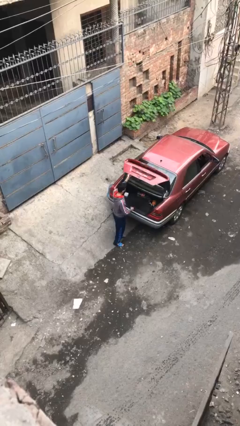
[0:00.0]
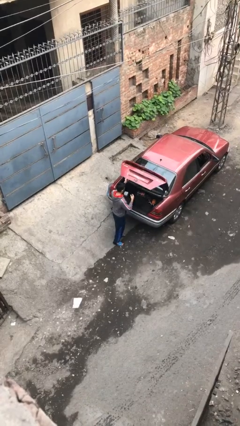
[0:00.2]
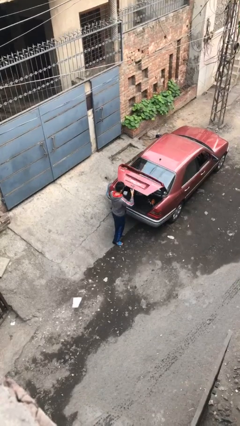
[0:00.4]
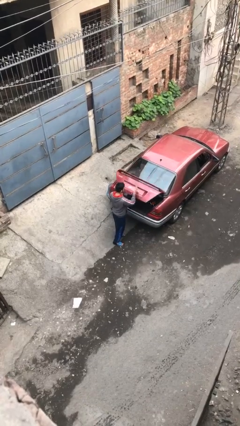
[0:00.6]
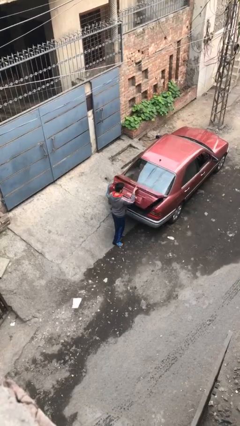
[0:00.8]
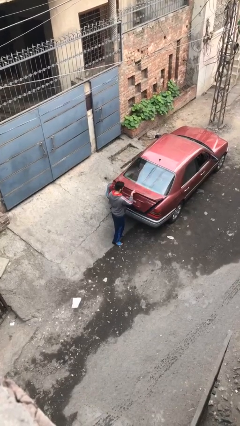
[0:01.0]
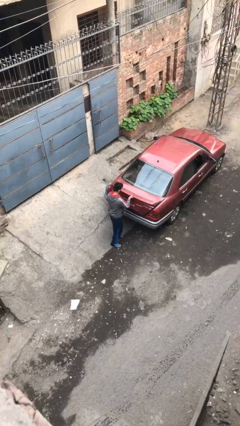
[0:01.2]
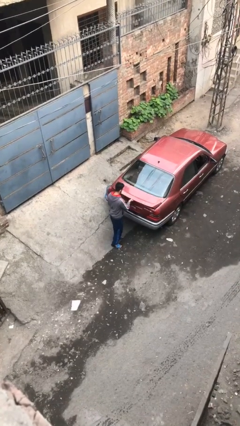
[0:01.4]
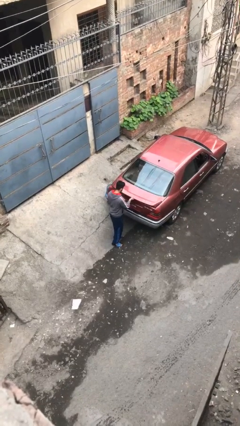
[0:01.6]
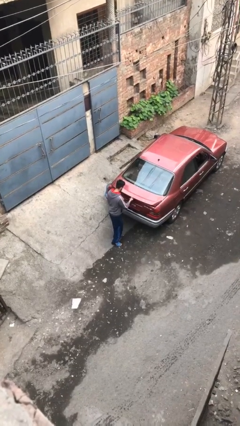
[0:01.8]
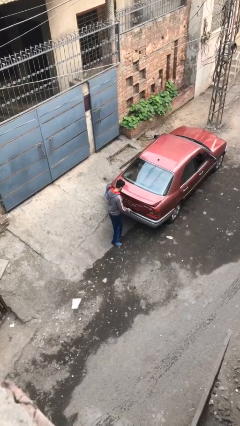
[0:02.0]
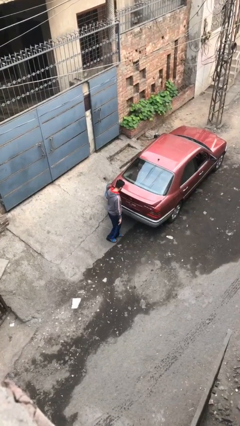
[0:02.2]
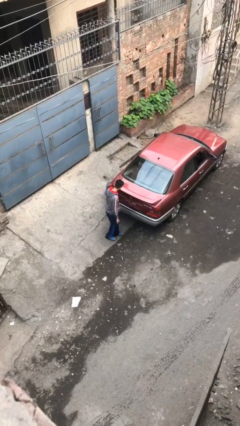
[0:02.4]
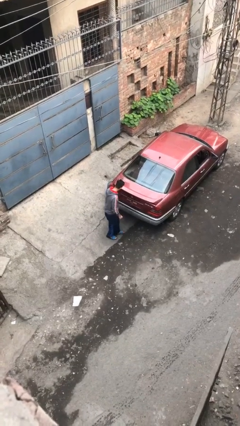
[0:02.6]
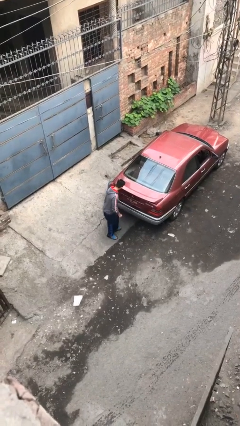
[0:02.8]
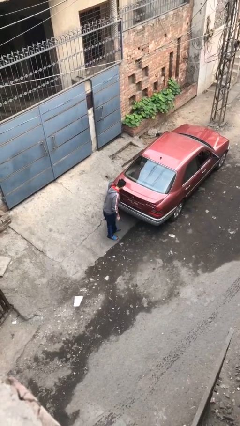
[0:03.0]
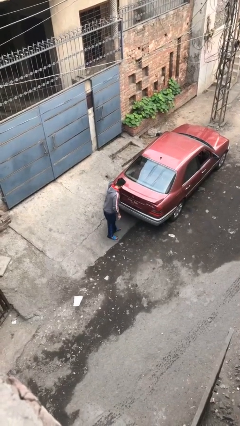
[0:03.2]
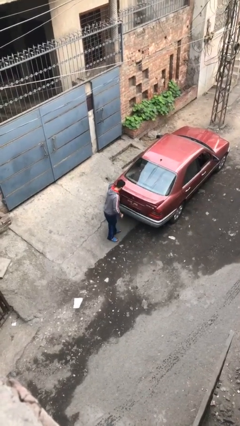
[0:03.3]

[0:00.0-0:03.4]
person closes car trunk

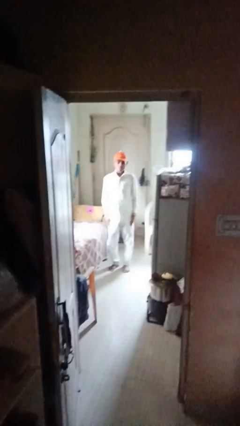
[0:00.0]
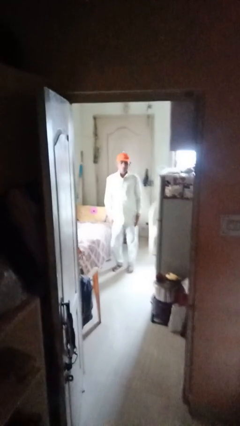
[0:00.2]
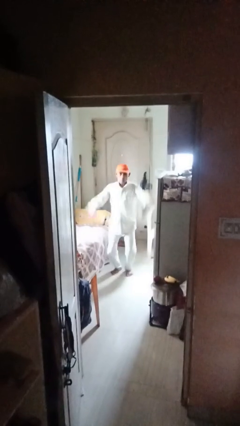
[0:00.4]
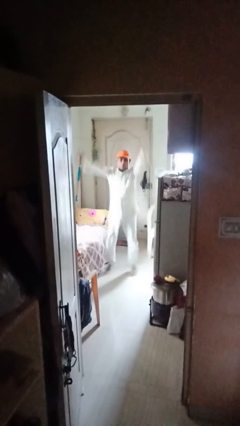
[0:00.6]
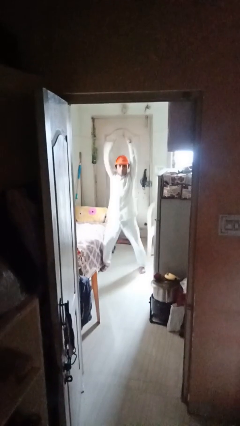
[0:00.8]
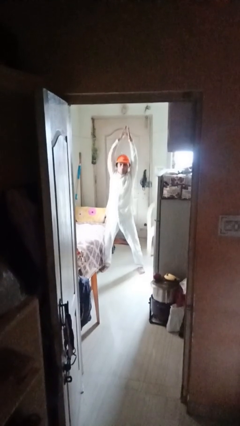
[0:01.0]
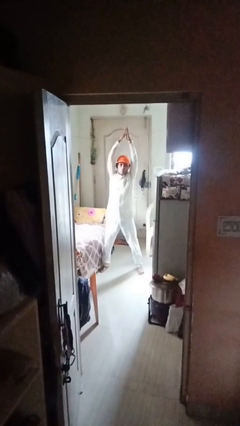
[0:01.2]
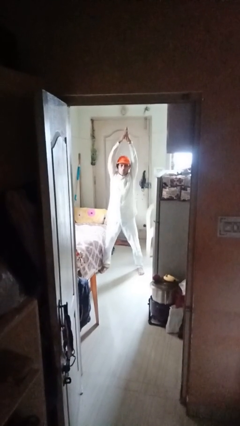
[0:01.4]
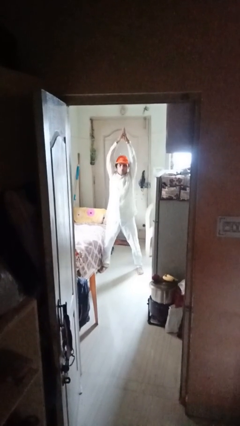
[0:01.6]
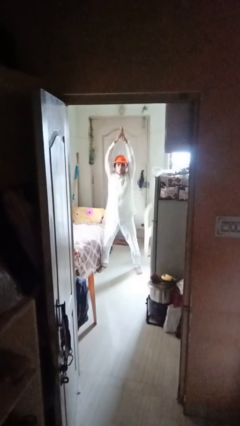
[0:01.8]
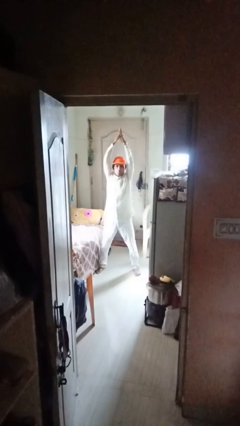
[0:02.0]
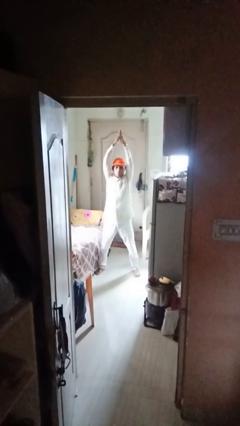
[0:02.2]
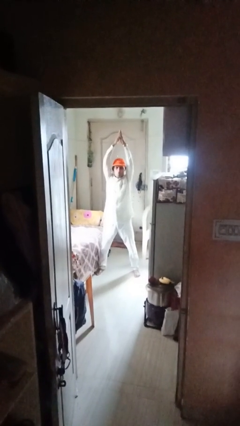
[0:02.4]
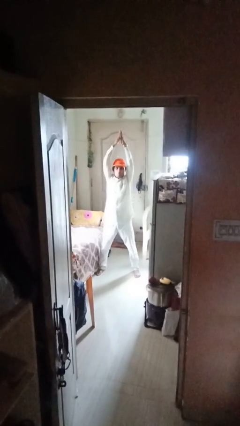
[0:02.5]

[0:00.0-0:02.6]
person exercises with jumping jacks

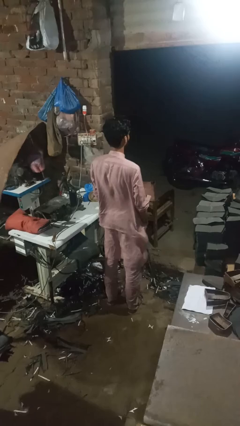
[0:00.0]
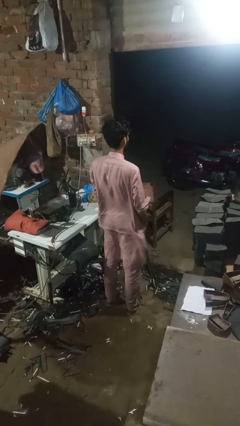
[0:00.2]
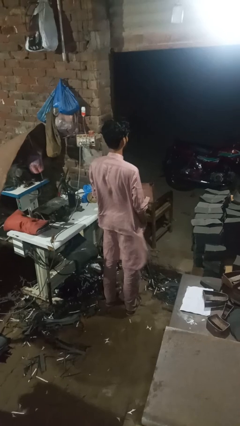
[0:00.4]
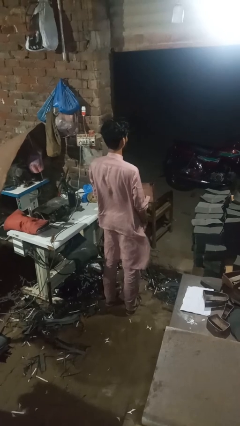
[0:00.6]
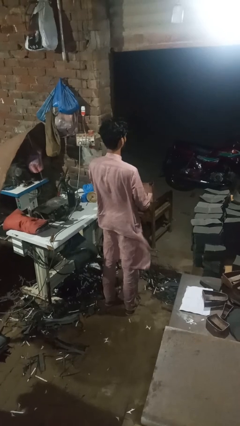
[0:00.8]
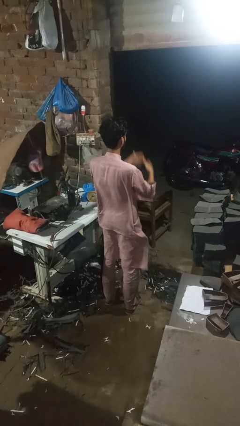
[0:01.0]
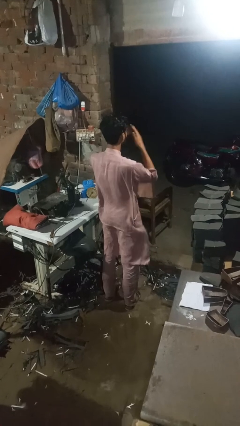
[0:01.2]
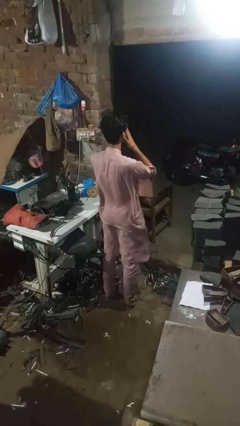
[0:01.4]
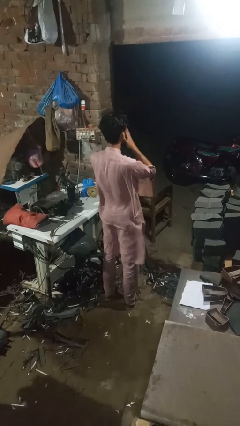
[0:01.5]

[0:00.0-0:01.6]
person sneezes into hand

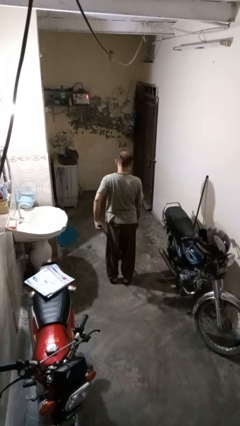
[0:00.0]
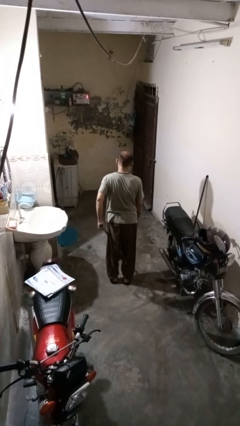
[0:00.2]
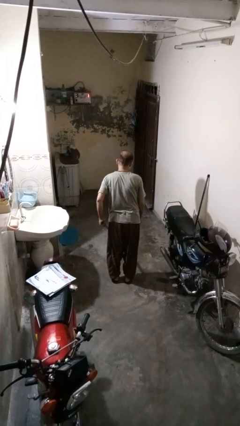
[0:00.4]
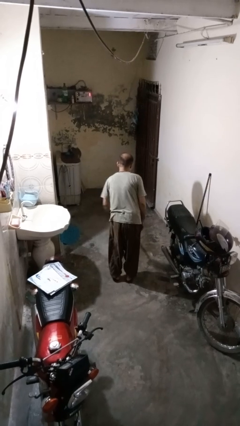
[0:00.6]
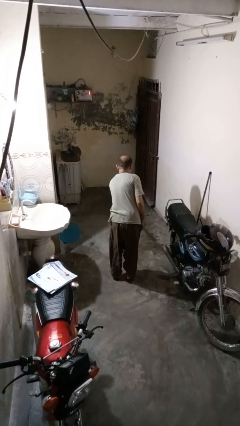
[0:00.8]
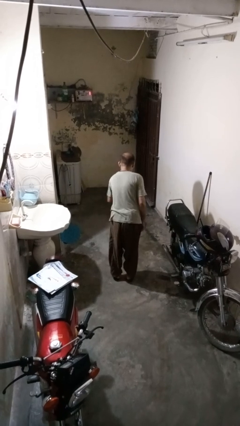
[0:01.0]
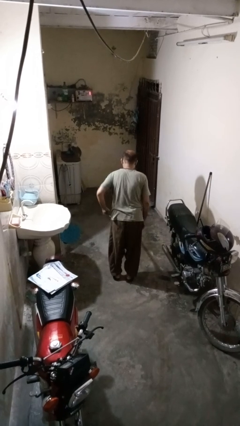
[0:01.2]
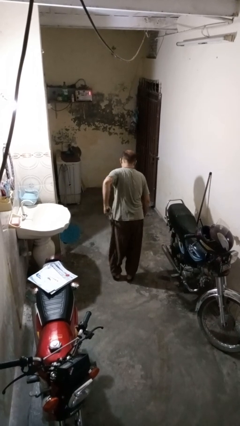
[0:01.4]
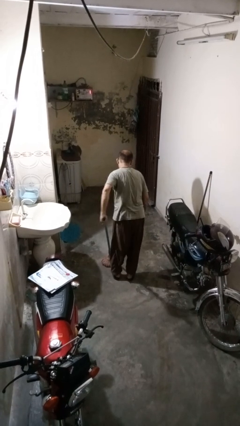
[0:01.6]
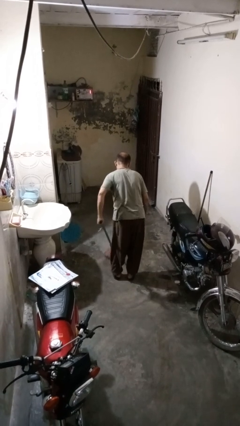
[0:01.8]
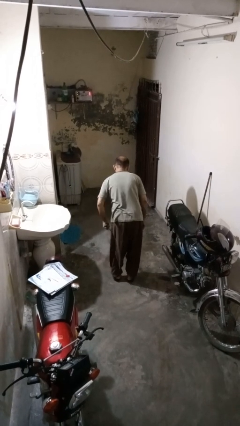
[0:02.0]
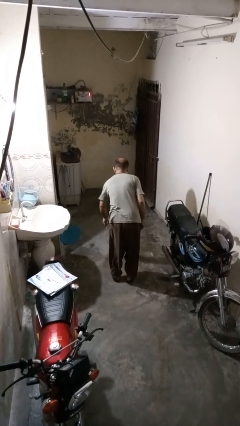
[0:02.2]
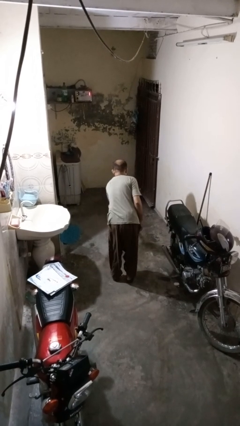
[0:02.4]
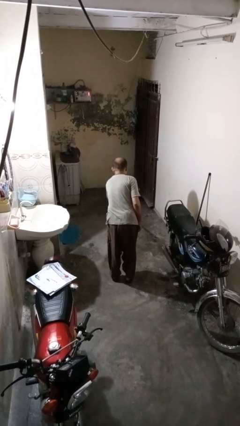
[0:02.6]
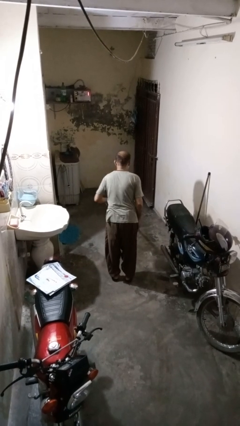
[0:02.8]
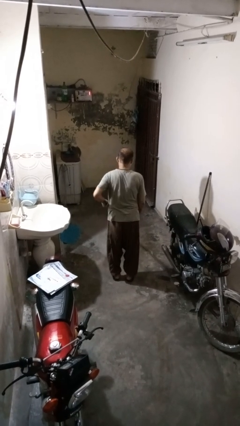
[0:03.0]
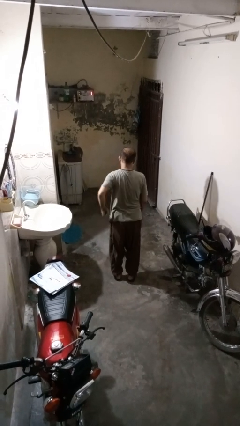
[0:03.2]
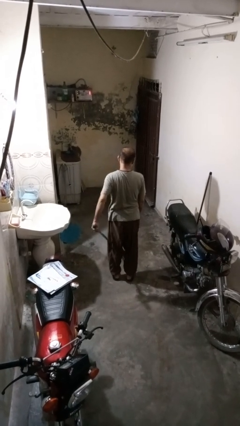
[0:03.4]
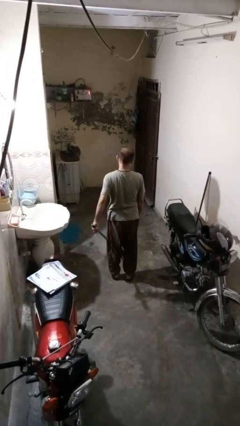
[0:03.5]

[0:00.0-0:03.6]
person mops

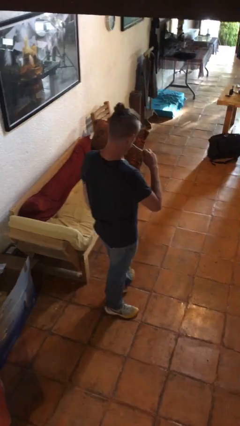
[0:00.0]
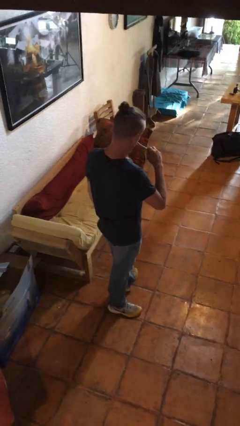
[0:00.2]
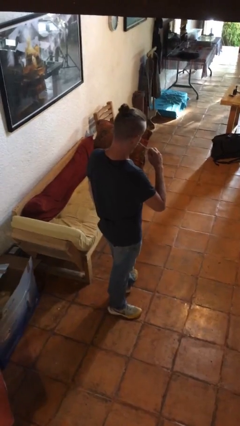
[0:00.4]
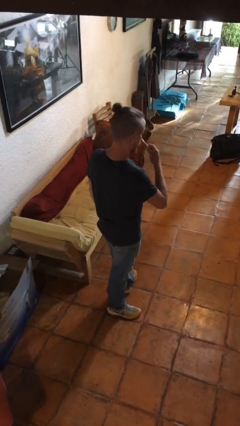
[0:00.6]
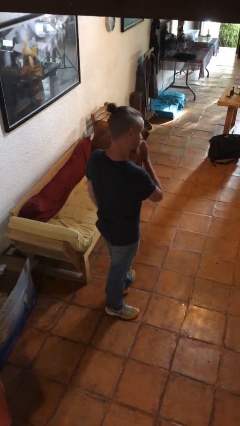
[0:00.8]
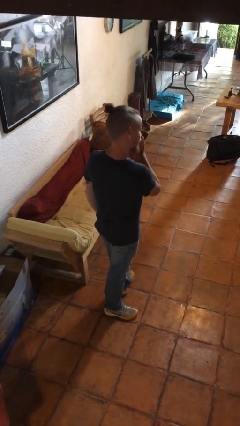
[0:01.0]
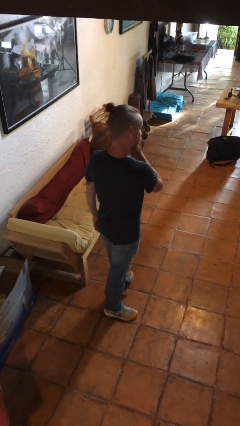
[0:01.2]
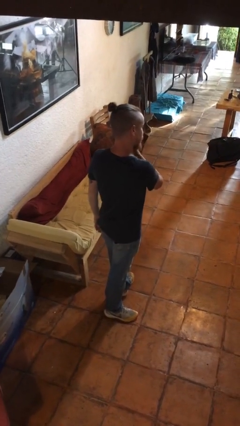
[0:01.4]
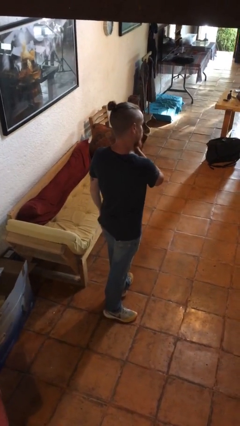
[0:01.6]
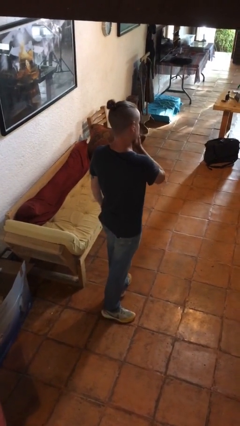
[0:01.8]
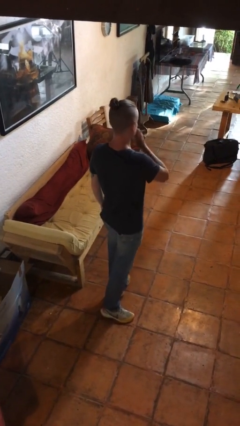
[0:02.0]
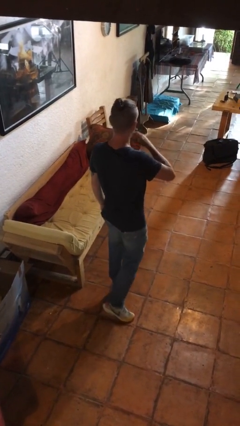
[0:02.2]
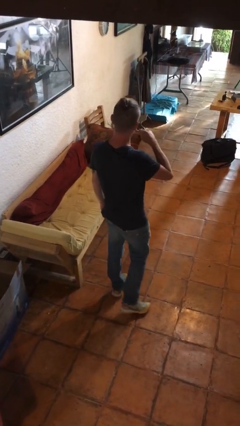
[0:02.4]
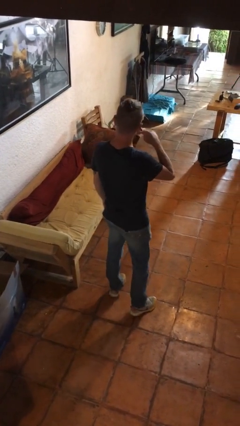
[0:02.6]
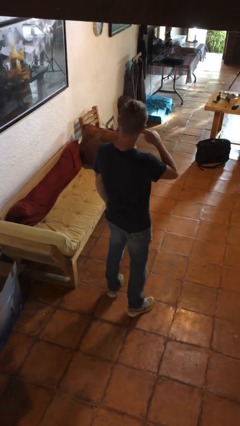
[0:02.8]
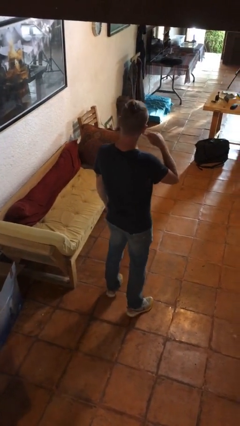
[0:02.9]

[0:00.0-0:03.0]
person brushes teeth

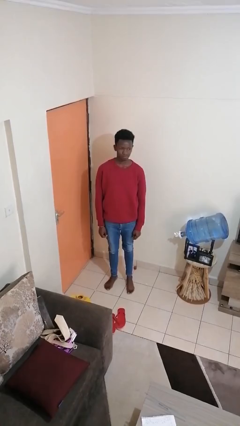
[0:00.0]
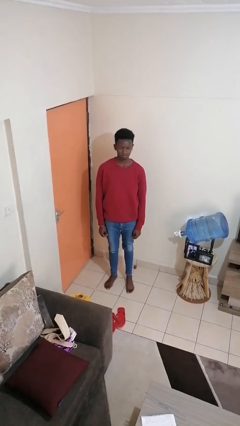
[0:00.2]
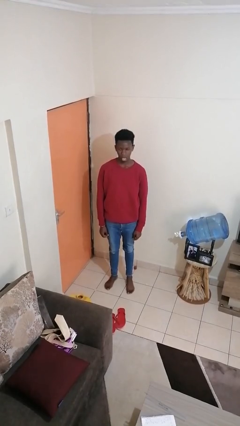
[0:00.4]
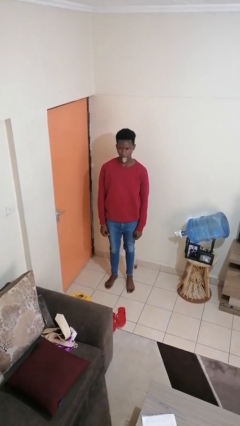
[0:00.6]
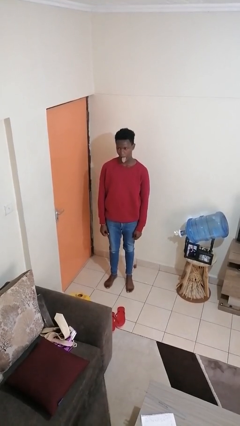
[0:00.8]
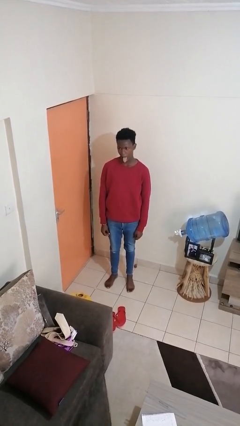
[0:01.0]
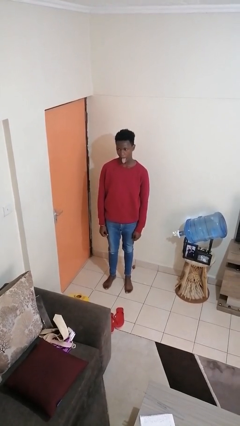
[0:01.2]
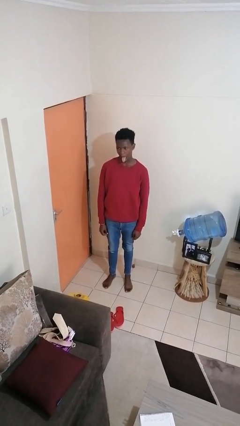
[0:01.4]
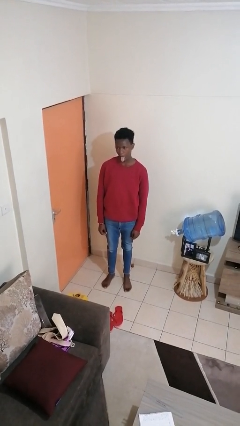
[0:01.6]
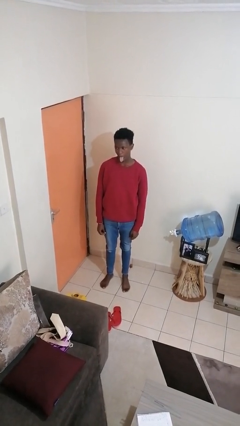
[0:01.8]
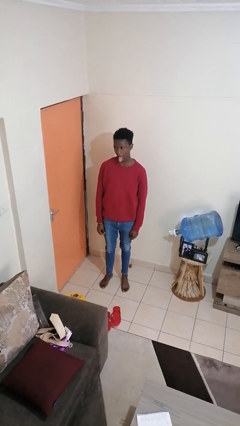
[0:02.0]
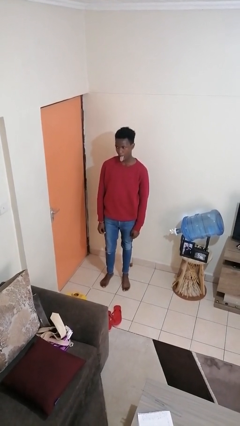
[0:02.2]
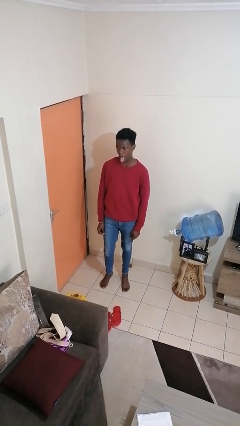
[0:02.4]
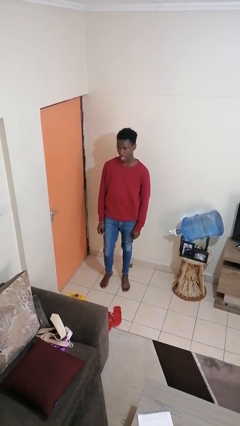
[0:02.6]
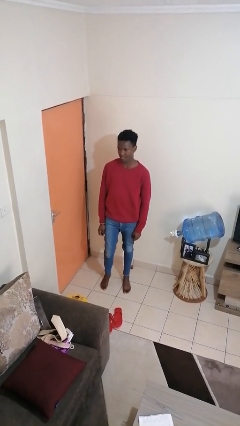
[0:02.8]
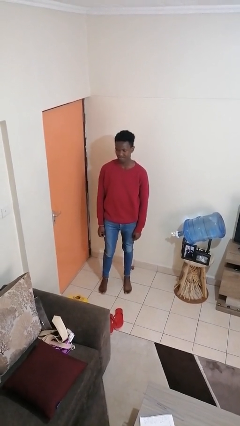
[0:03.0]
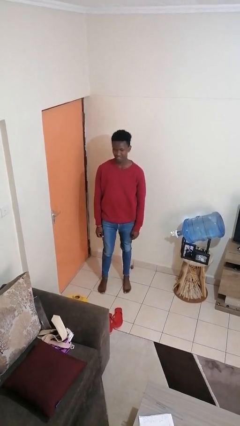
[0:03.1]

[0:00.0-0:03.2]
person sticks out tongue

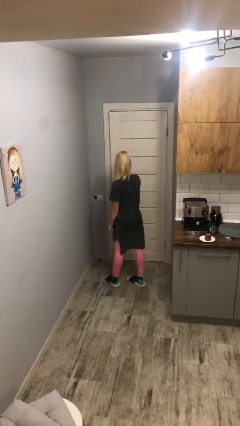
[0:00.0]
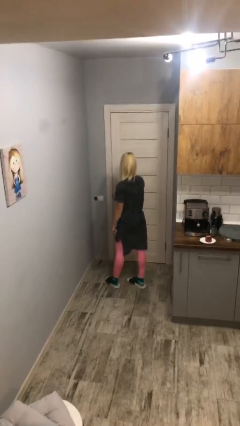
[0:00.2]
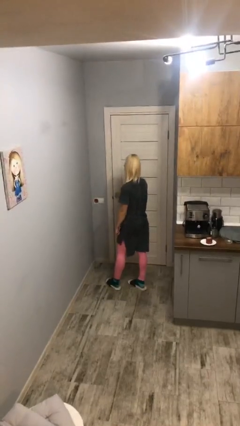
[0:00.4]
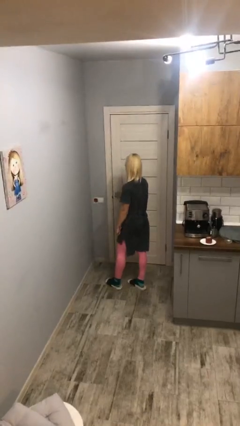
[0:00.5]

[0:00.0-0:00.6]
person closes facility door
